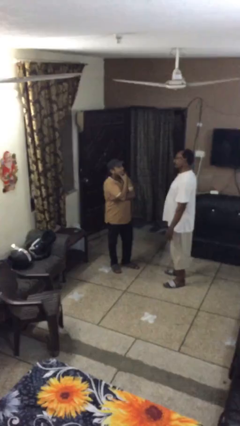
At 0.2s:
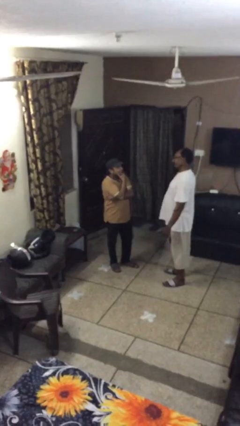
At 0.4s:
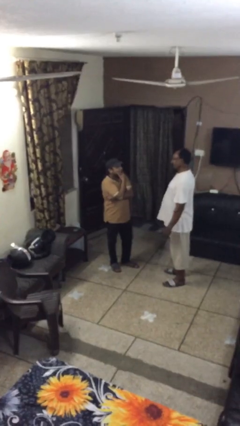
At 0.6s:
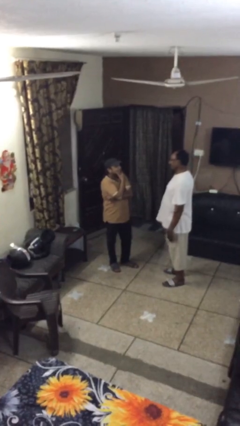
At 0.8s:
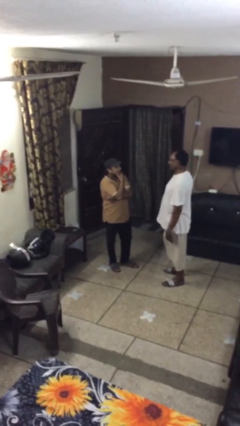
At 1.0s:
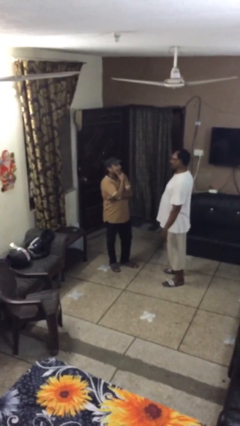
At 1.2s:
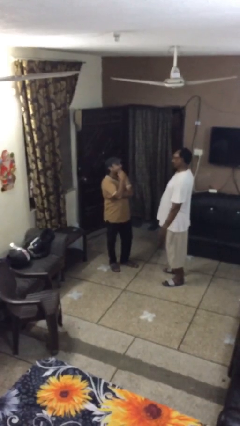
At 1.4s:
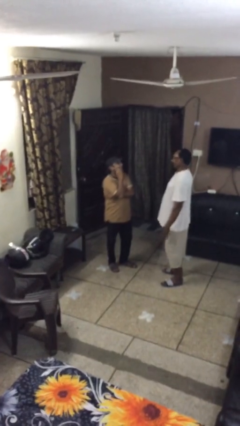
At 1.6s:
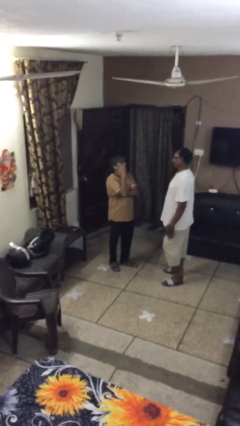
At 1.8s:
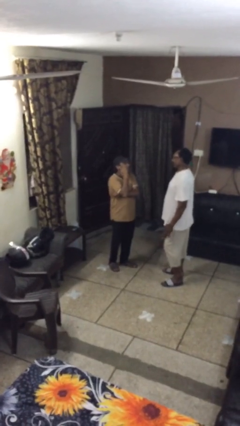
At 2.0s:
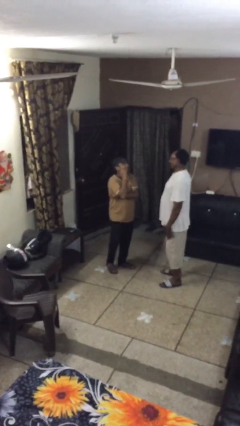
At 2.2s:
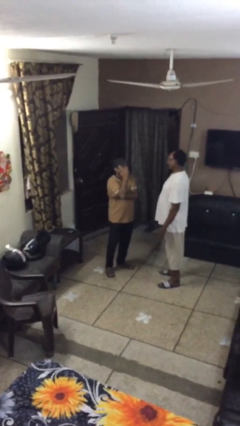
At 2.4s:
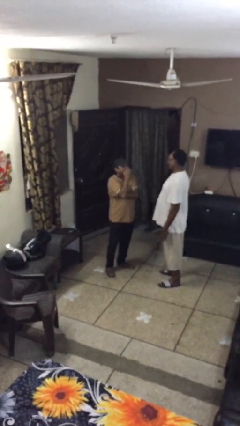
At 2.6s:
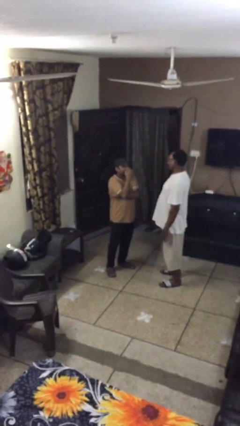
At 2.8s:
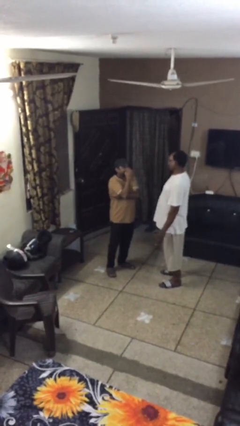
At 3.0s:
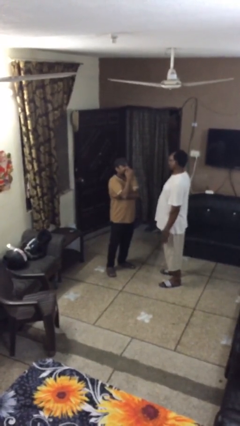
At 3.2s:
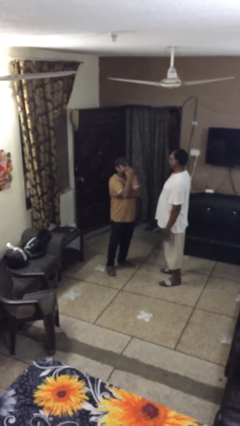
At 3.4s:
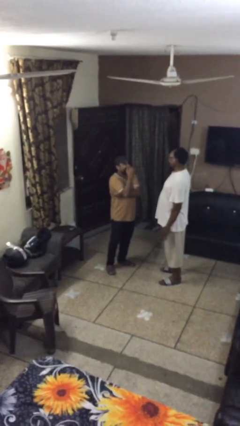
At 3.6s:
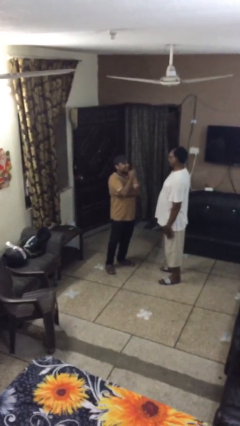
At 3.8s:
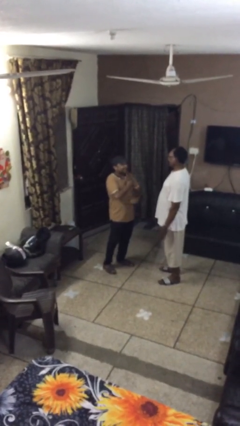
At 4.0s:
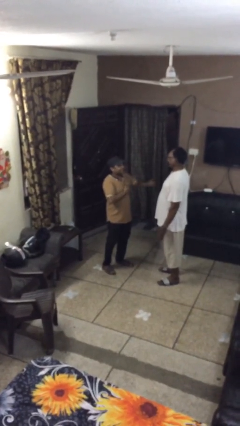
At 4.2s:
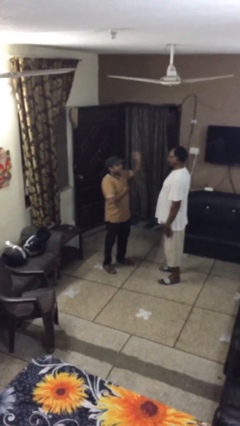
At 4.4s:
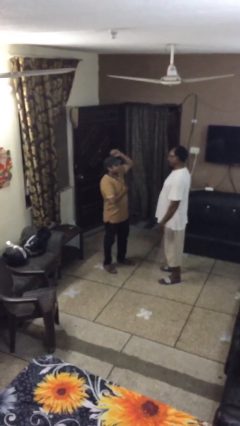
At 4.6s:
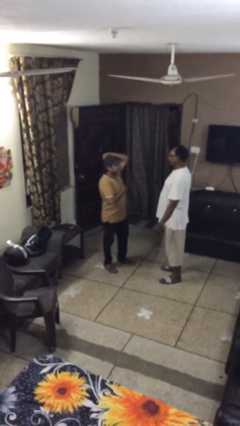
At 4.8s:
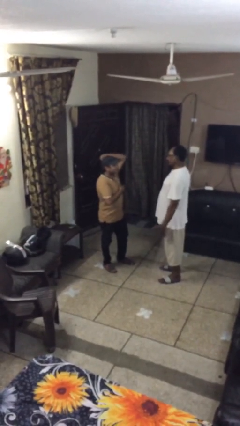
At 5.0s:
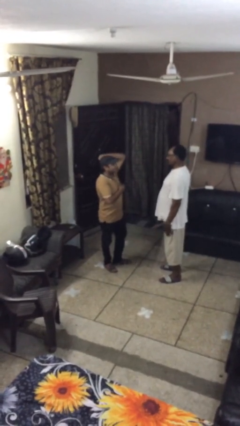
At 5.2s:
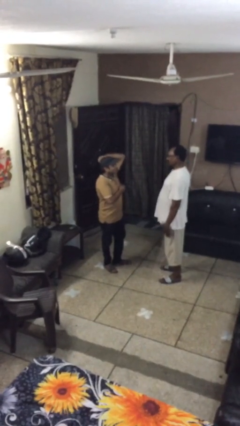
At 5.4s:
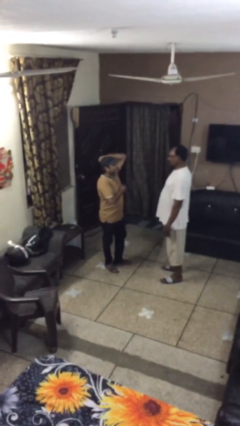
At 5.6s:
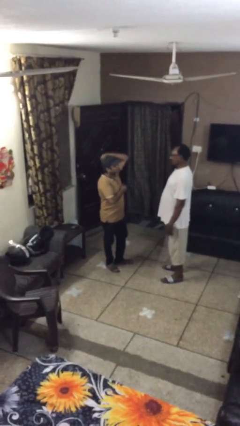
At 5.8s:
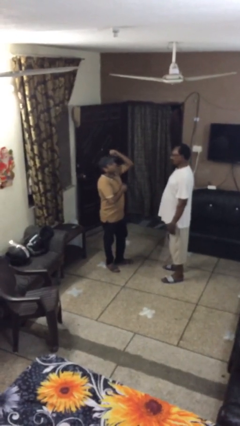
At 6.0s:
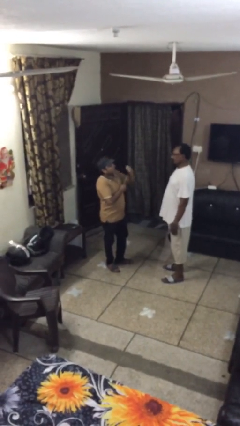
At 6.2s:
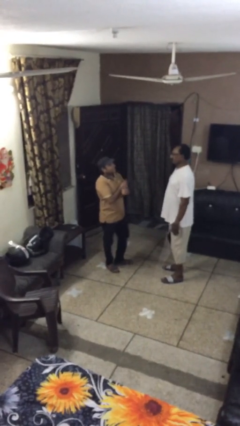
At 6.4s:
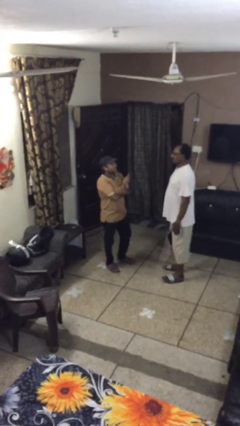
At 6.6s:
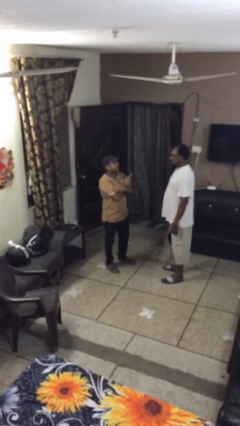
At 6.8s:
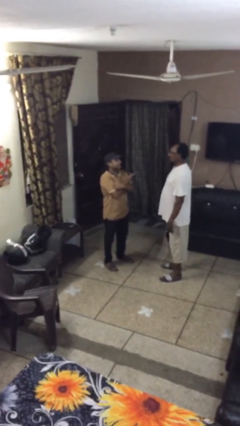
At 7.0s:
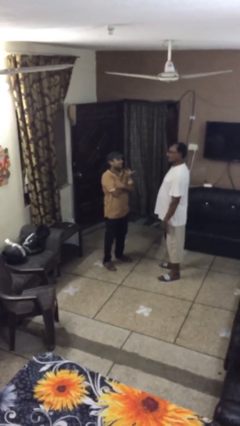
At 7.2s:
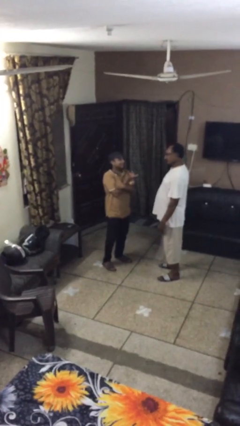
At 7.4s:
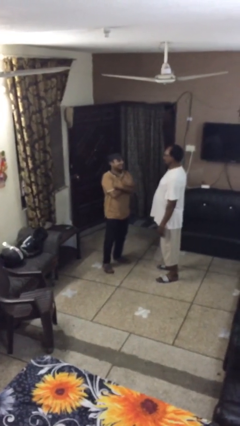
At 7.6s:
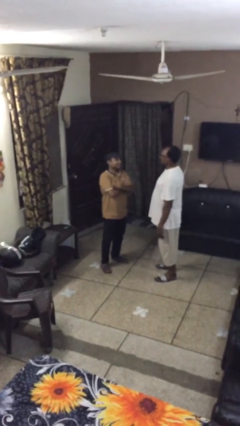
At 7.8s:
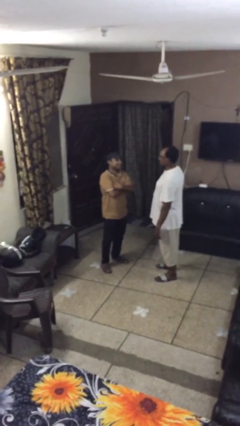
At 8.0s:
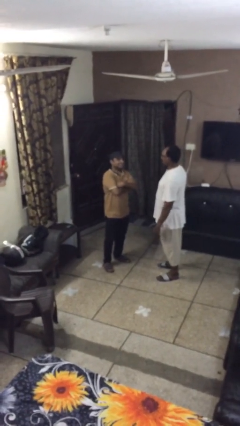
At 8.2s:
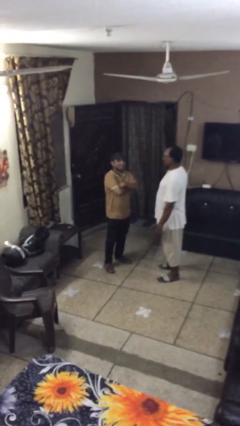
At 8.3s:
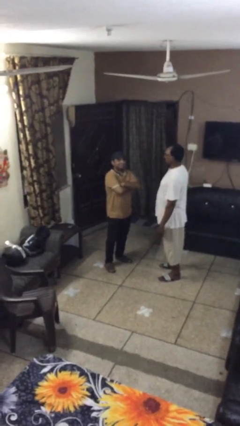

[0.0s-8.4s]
person talks to person

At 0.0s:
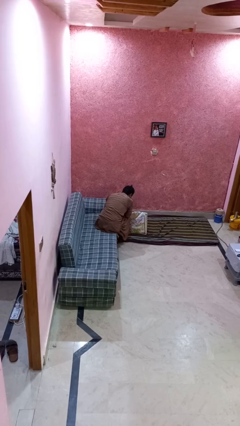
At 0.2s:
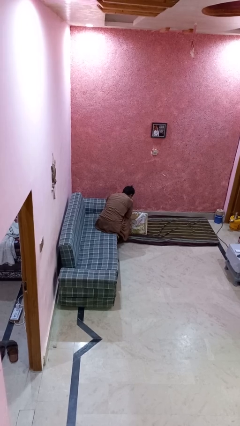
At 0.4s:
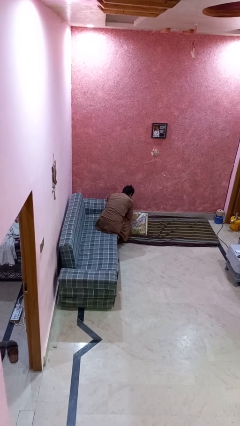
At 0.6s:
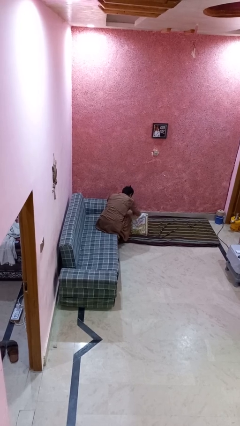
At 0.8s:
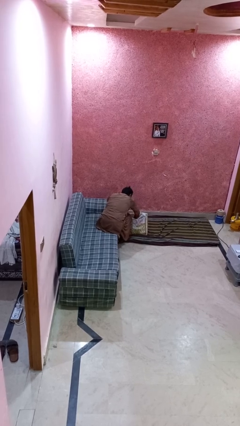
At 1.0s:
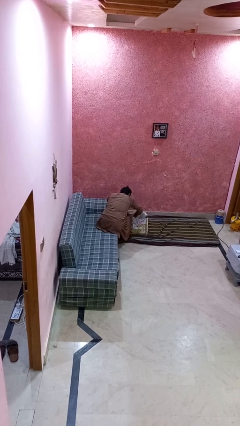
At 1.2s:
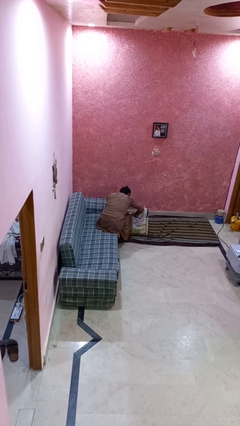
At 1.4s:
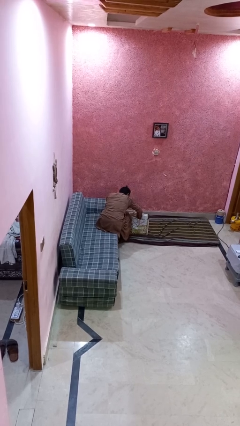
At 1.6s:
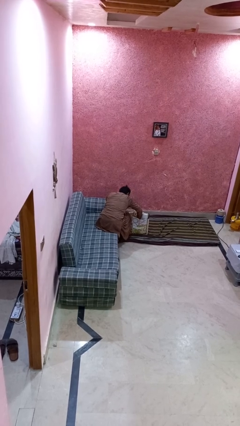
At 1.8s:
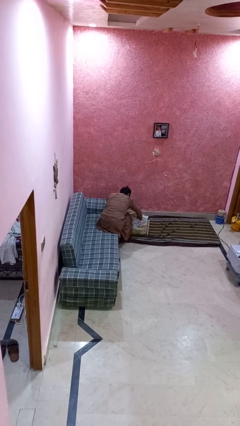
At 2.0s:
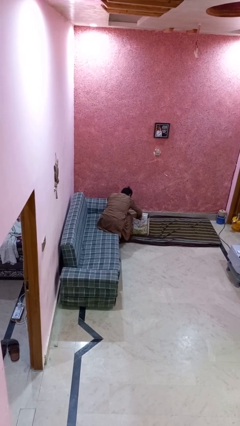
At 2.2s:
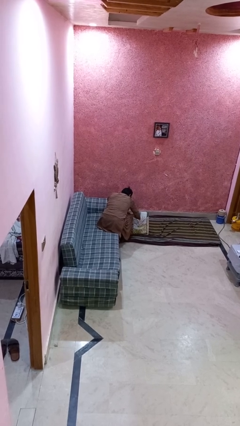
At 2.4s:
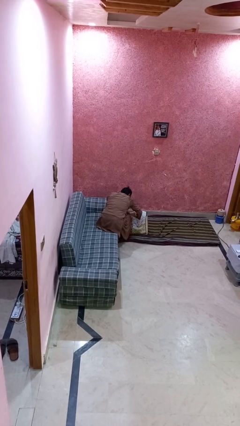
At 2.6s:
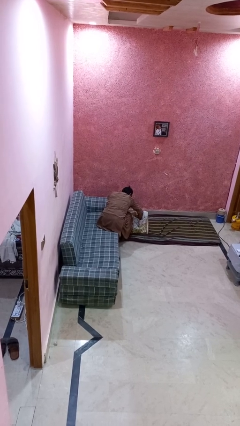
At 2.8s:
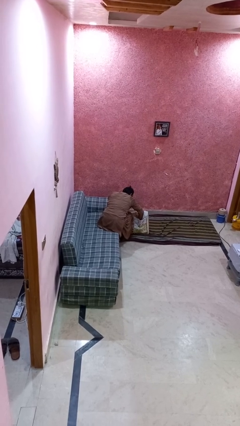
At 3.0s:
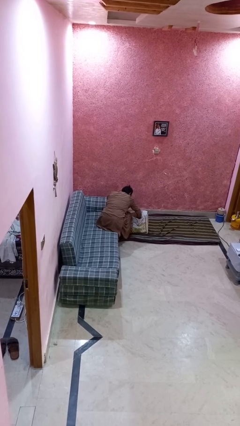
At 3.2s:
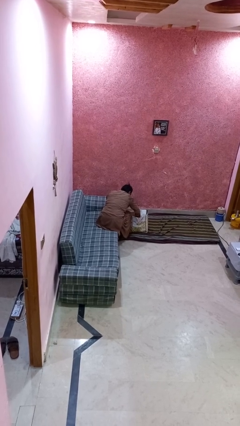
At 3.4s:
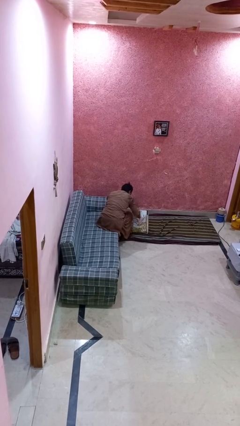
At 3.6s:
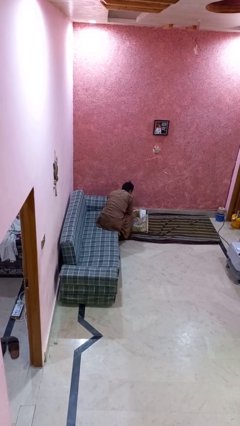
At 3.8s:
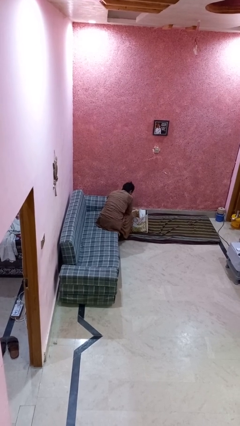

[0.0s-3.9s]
person searches in bag

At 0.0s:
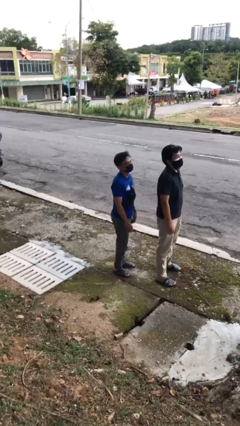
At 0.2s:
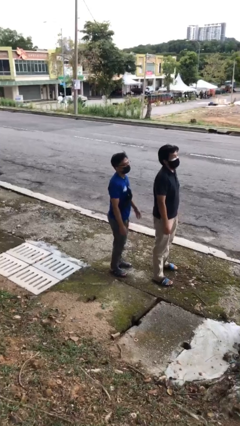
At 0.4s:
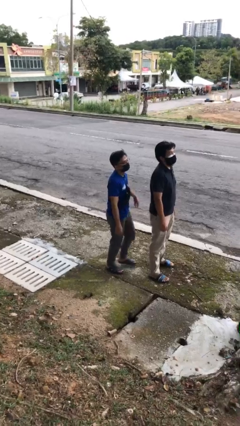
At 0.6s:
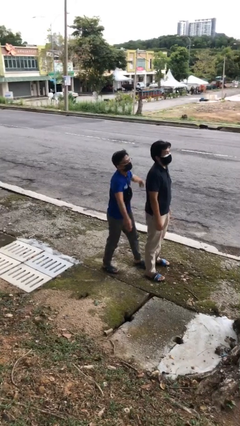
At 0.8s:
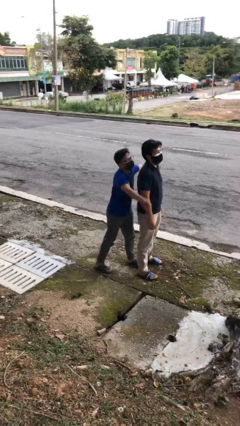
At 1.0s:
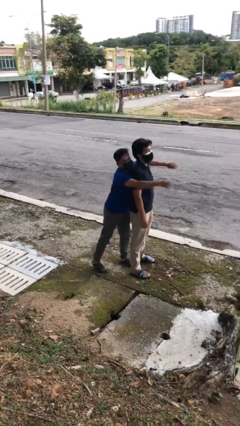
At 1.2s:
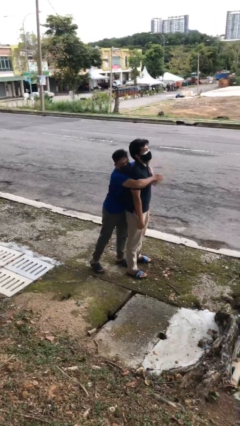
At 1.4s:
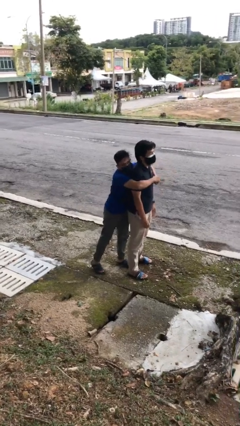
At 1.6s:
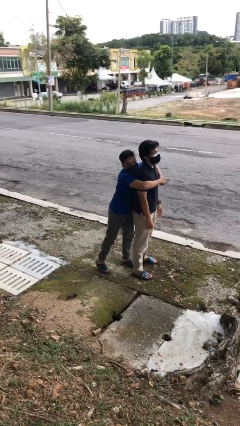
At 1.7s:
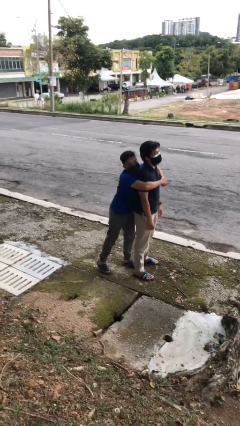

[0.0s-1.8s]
person hugs person from behind

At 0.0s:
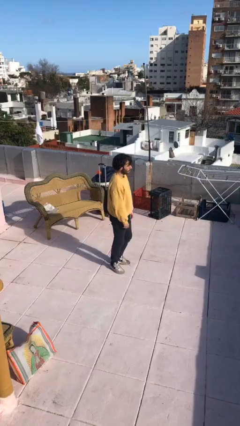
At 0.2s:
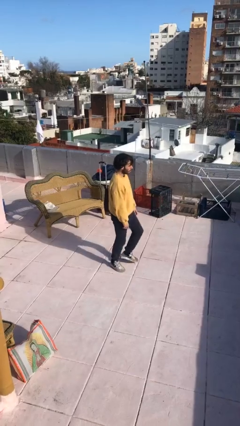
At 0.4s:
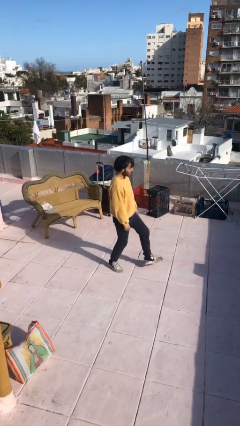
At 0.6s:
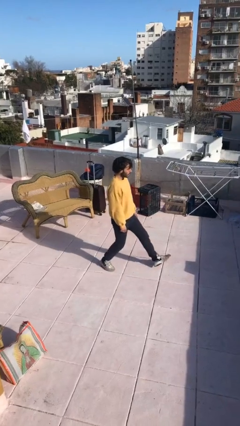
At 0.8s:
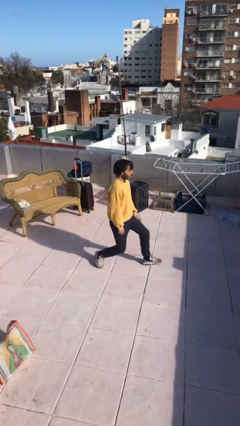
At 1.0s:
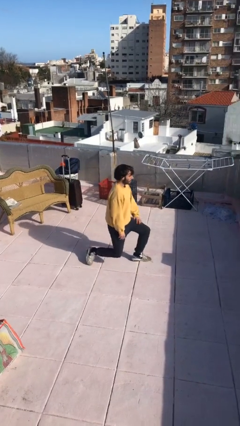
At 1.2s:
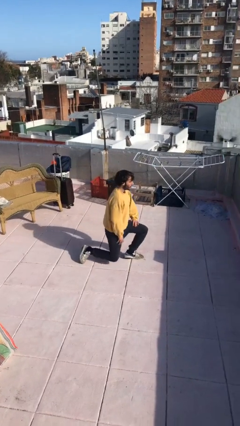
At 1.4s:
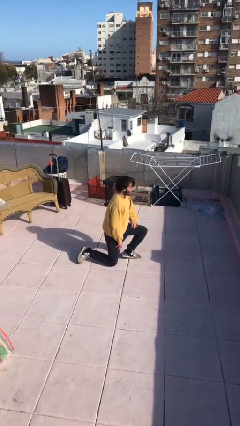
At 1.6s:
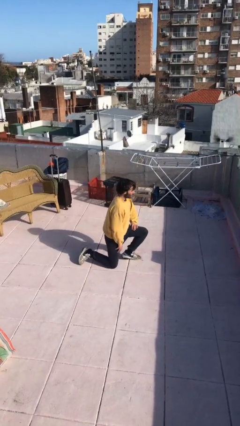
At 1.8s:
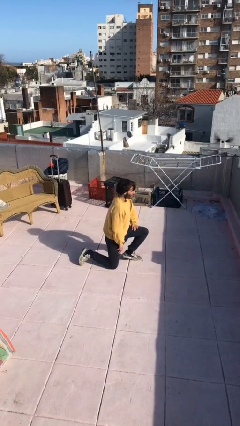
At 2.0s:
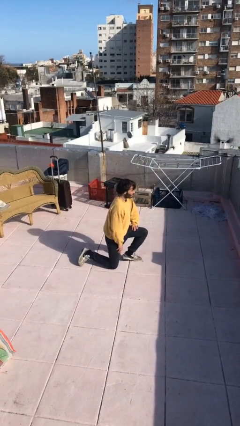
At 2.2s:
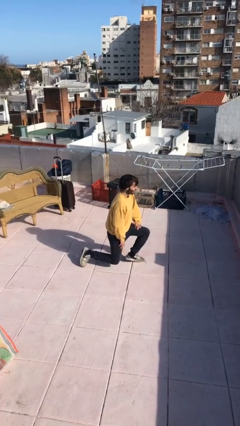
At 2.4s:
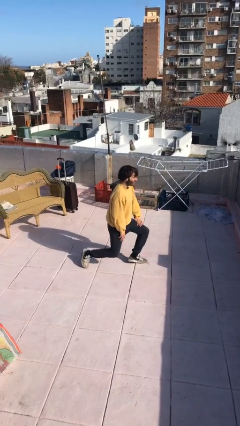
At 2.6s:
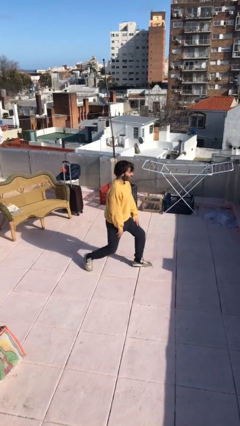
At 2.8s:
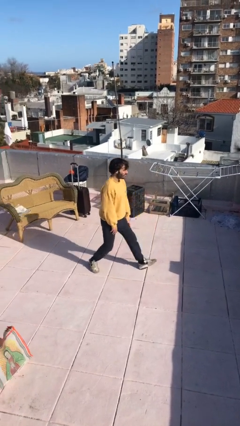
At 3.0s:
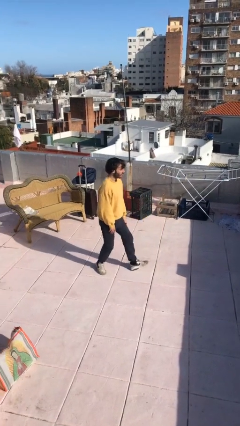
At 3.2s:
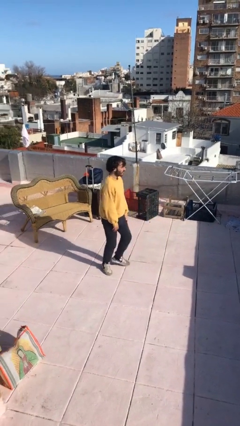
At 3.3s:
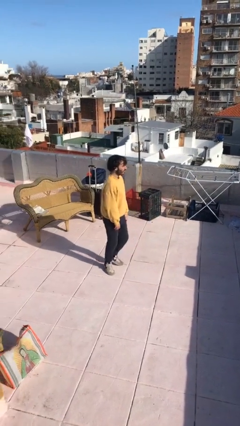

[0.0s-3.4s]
person exercises with lunges

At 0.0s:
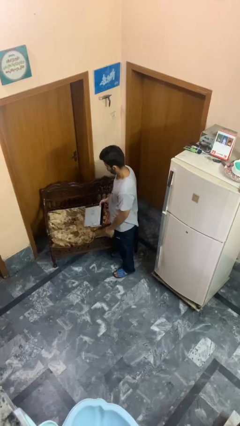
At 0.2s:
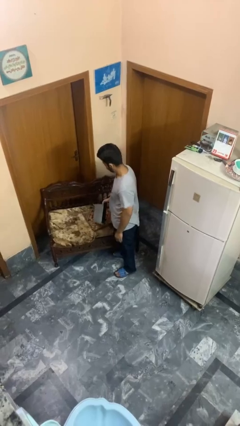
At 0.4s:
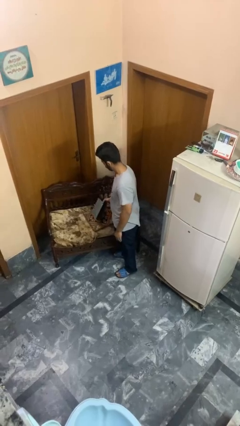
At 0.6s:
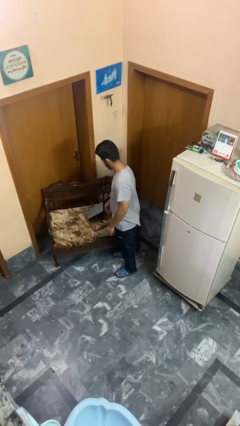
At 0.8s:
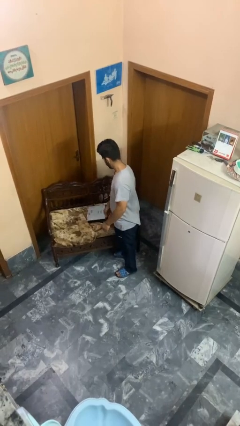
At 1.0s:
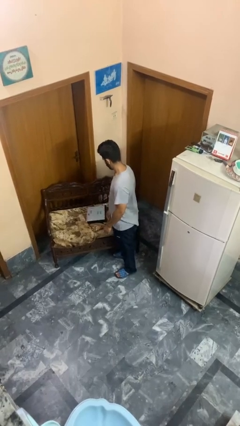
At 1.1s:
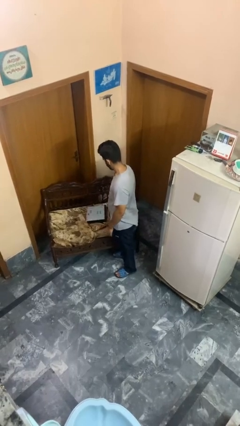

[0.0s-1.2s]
person puts down object on couch
